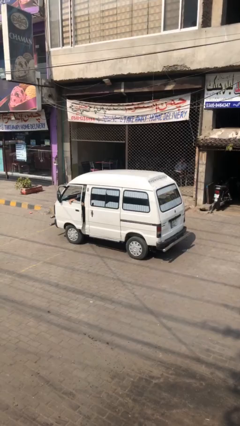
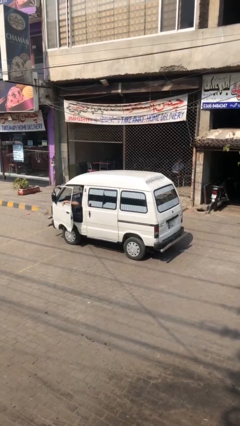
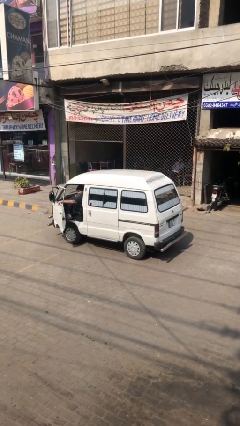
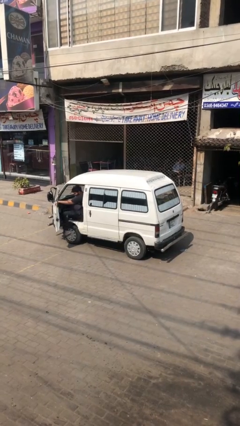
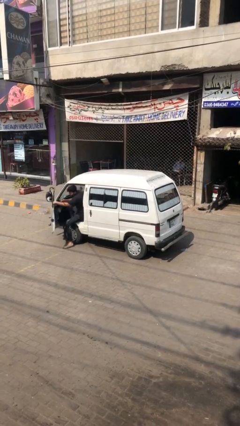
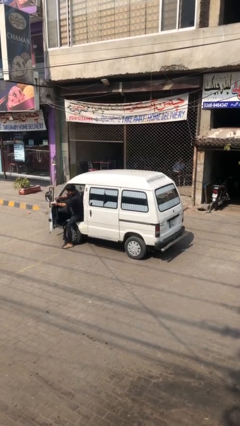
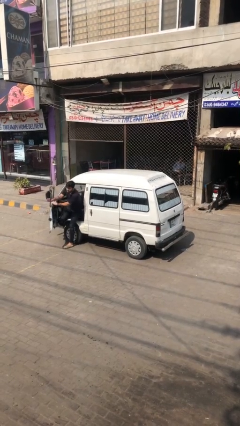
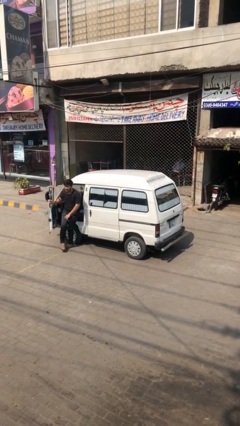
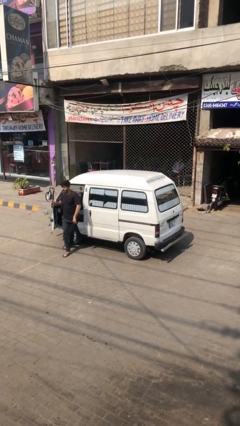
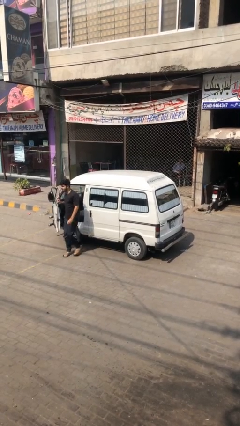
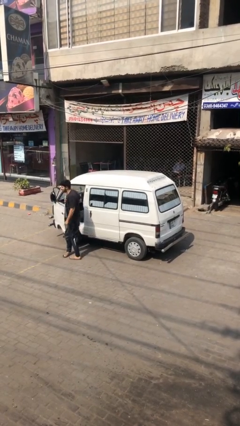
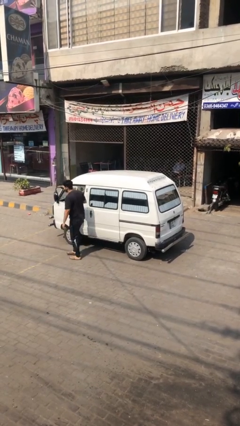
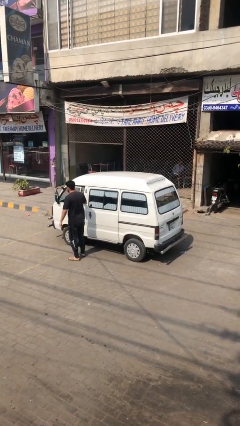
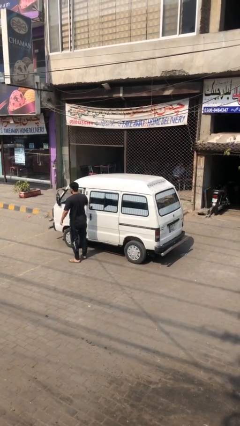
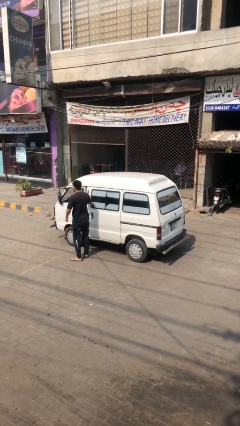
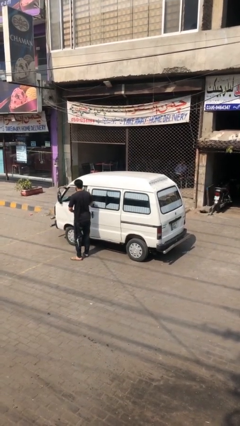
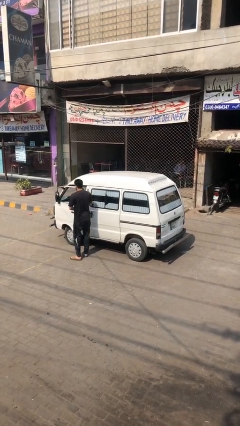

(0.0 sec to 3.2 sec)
car drops off person

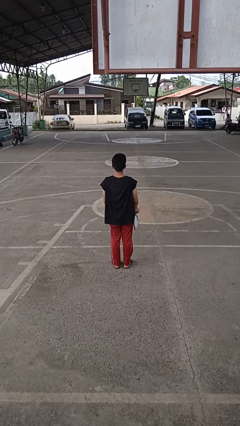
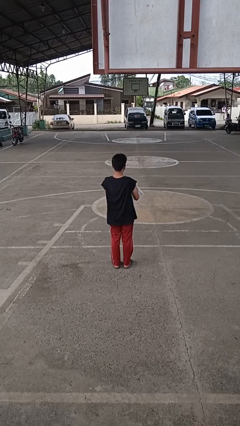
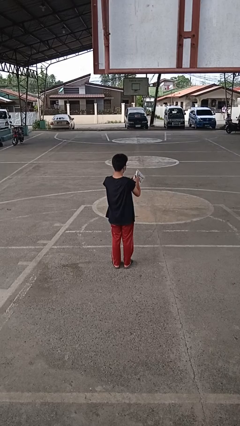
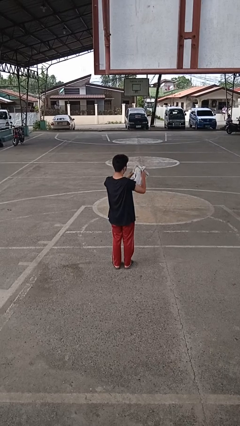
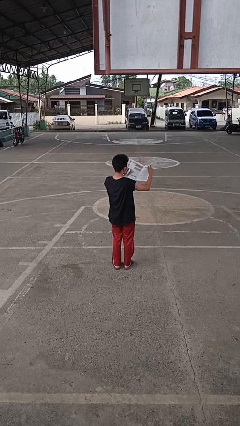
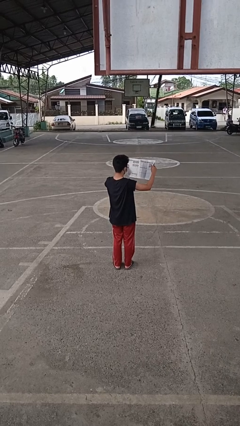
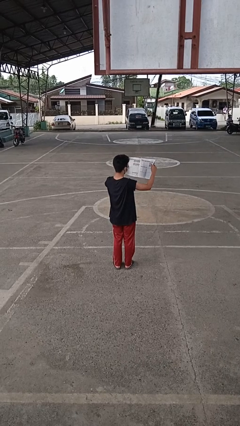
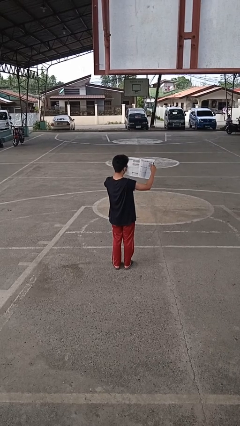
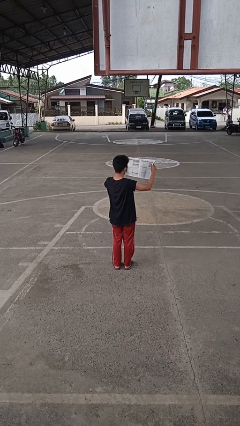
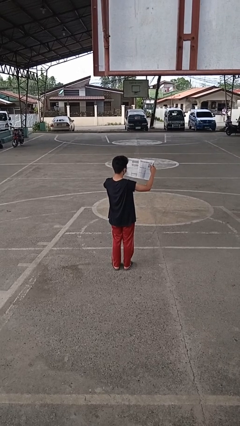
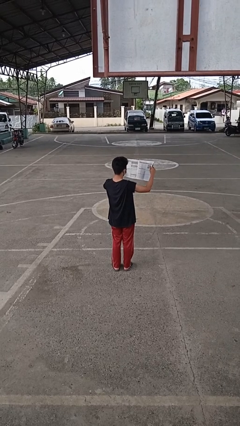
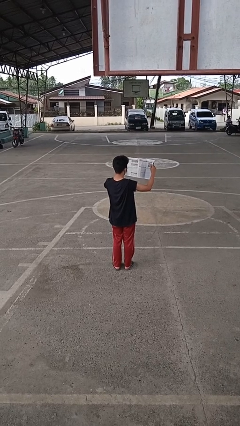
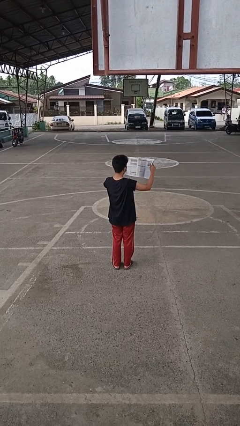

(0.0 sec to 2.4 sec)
person reads newspaper

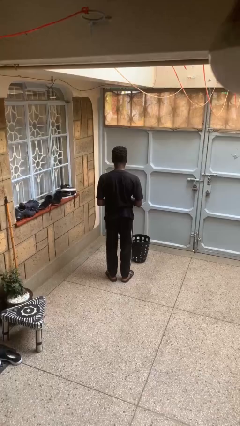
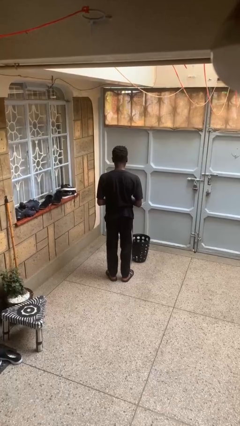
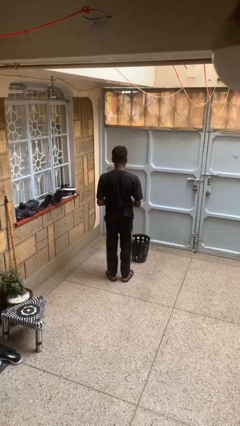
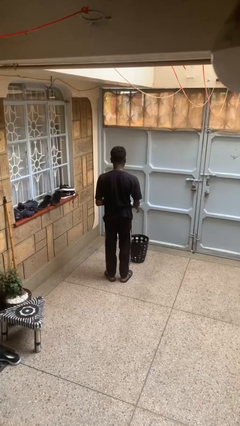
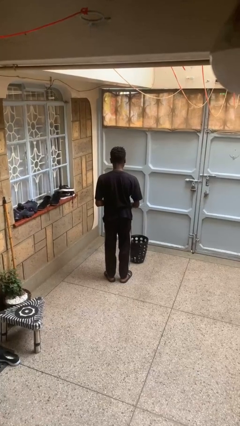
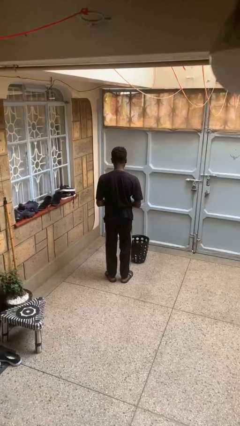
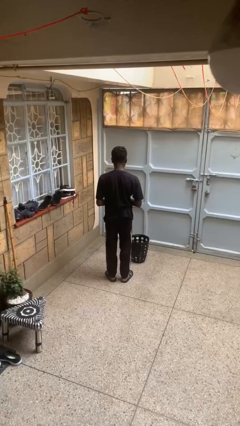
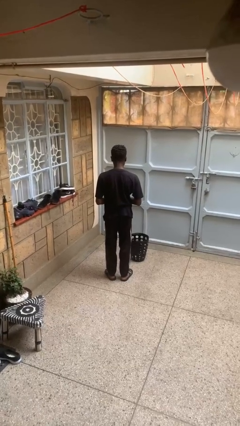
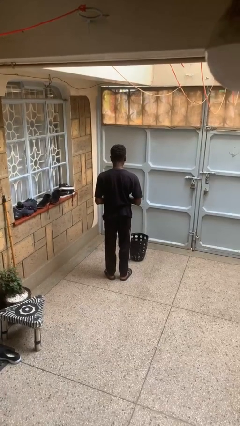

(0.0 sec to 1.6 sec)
person discards trash

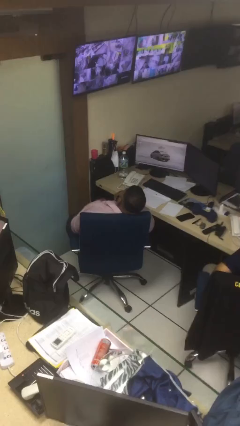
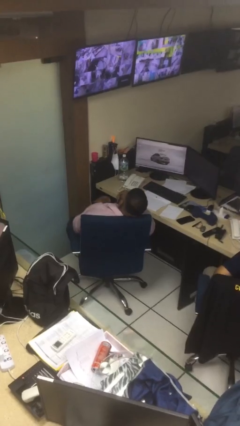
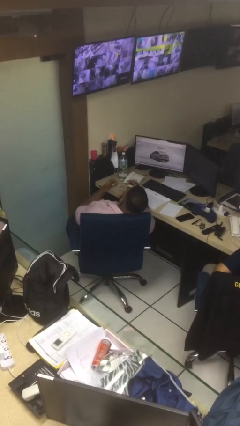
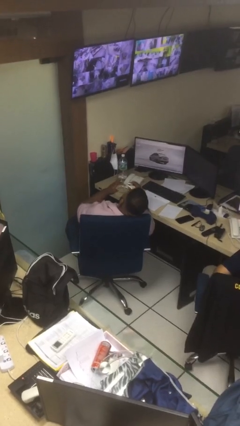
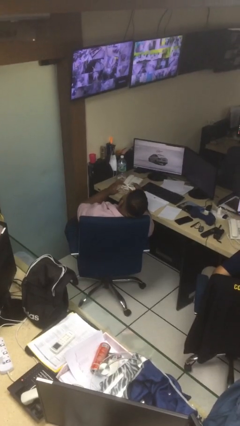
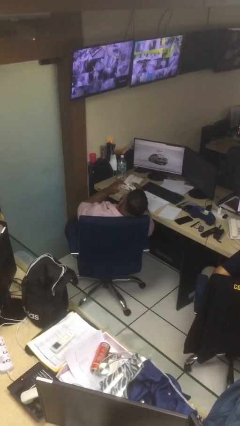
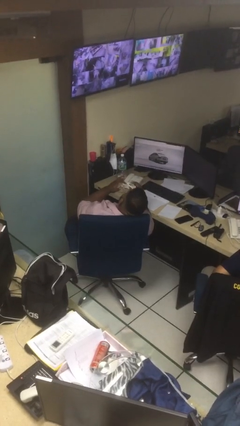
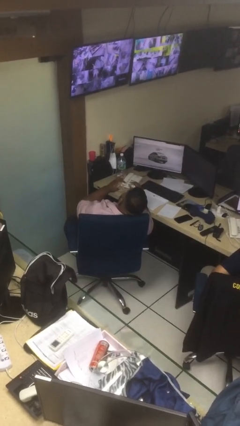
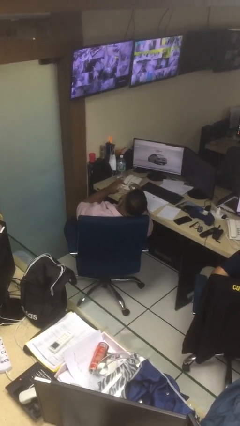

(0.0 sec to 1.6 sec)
person clips fingernails

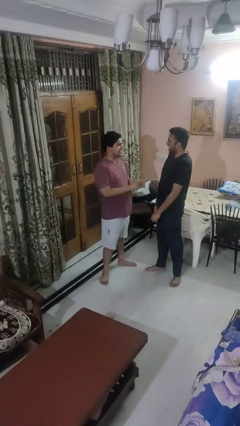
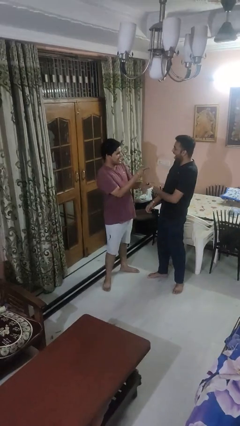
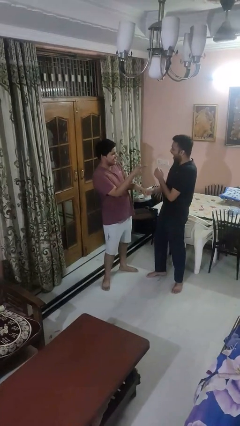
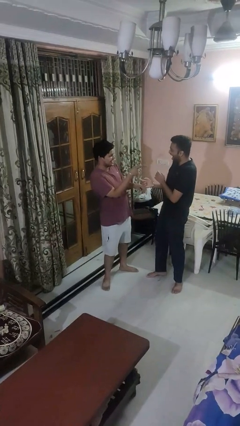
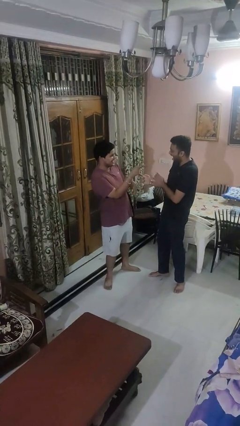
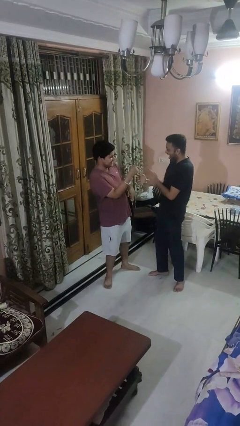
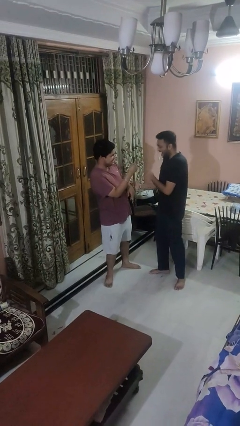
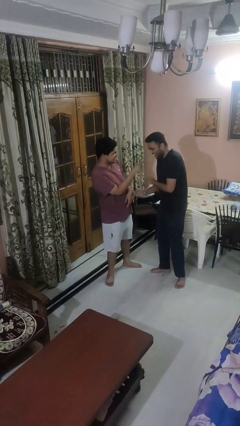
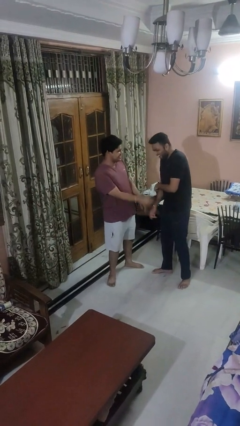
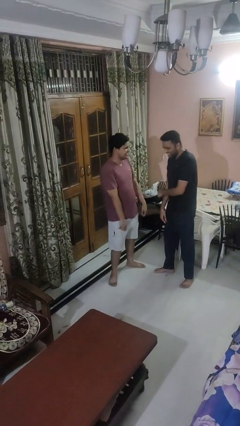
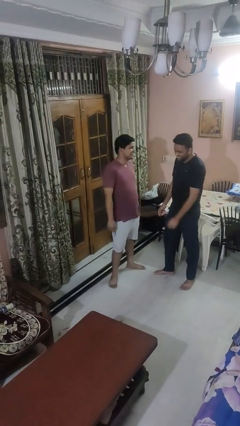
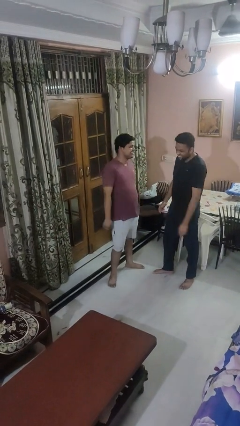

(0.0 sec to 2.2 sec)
person laughs with person

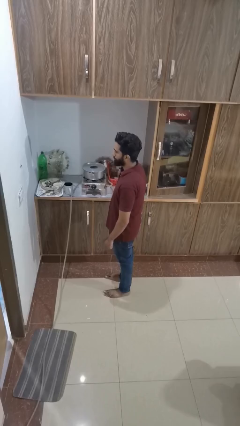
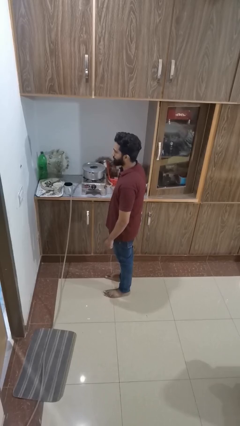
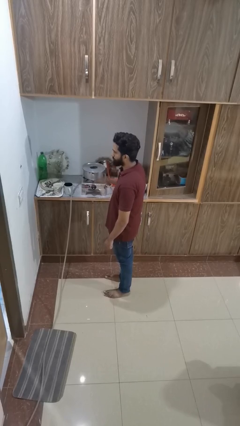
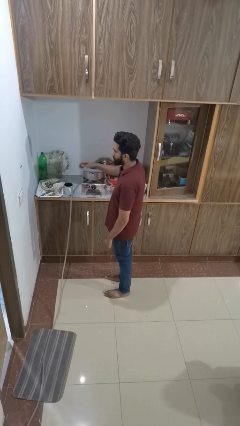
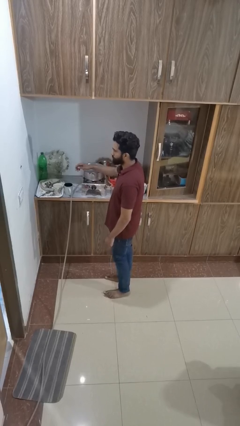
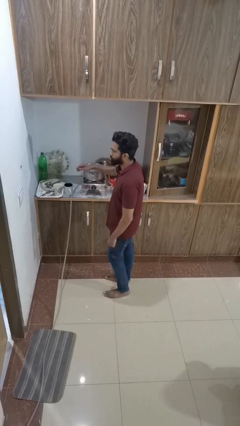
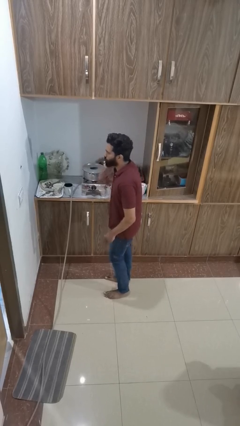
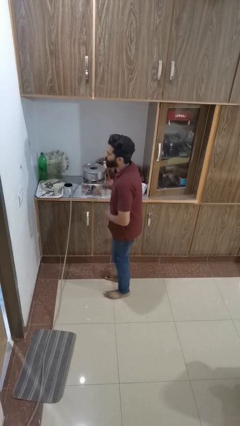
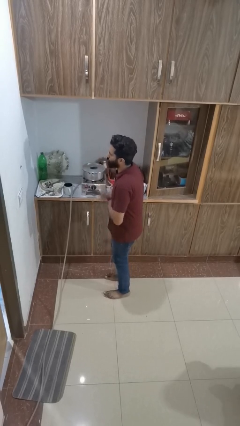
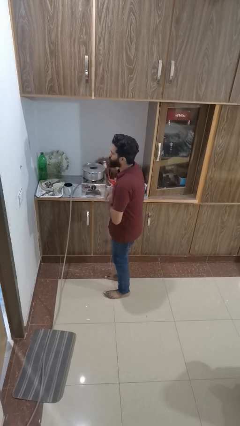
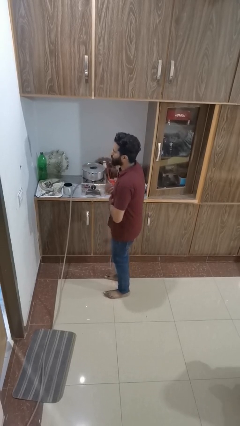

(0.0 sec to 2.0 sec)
person burns hand

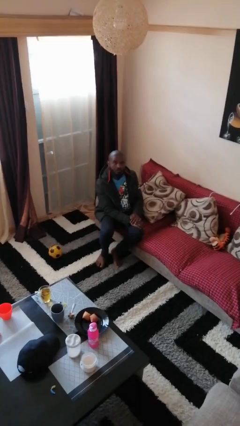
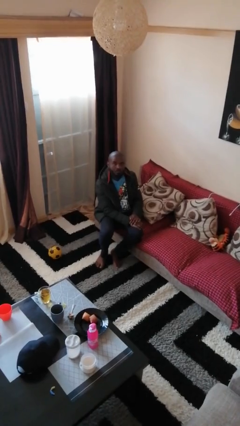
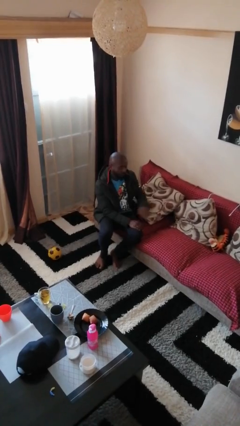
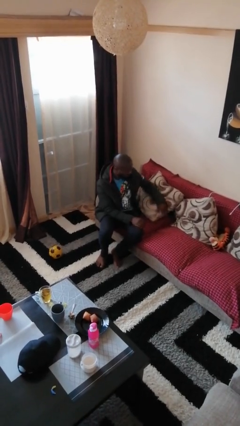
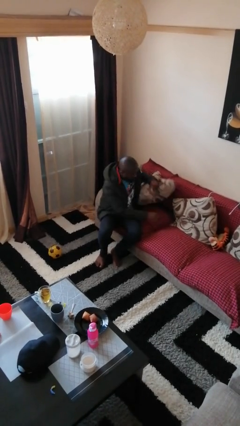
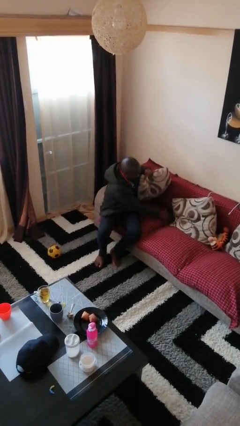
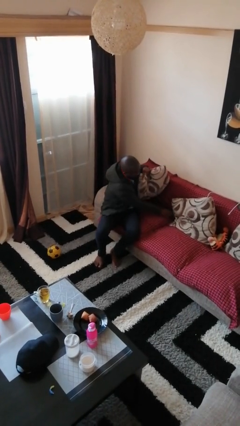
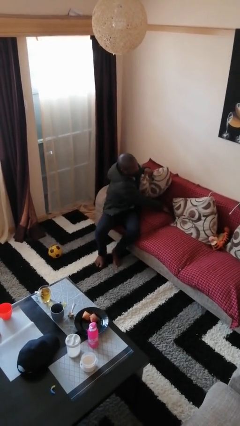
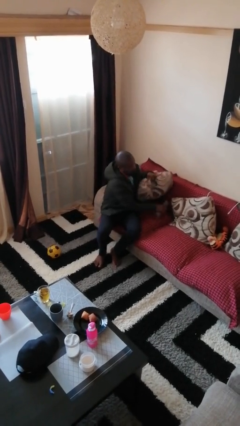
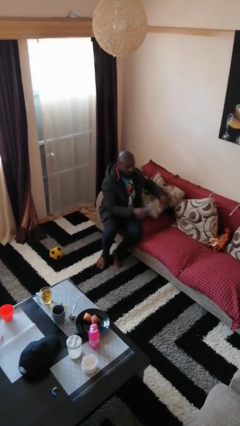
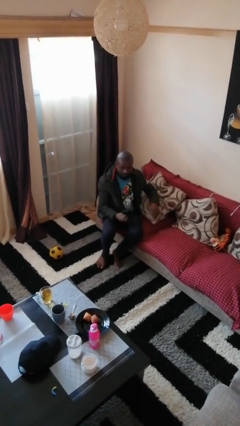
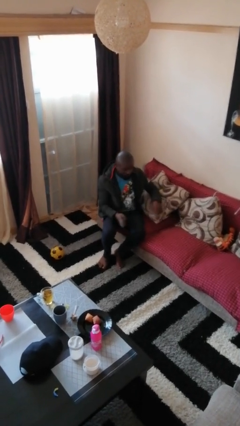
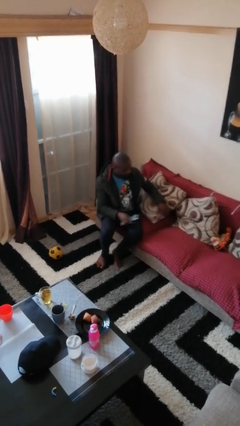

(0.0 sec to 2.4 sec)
person searches in couch

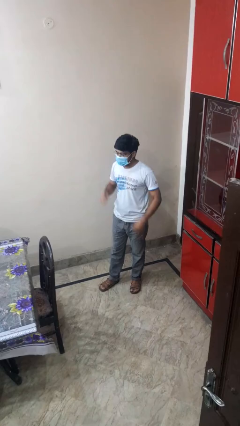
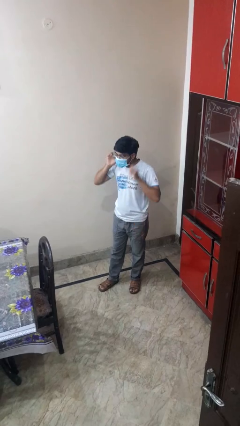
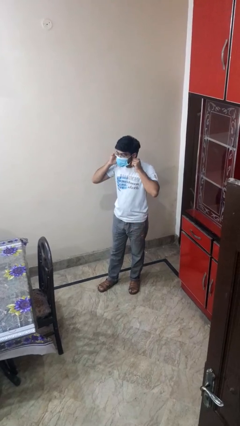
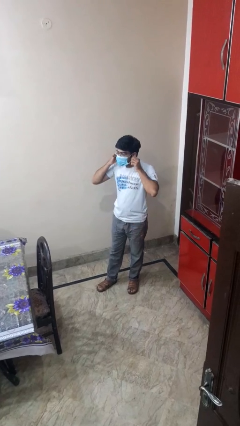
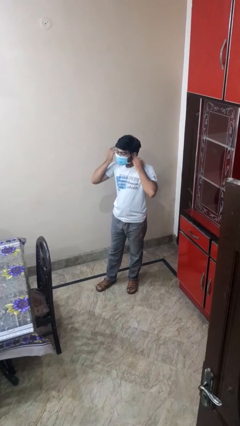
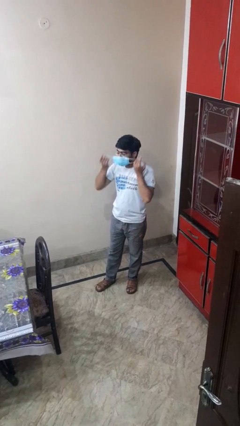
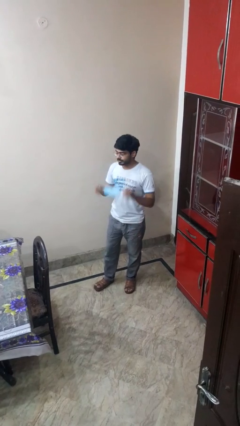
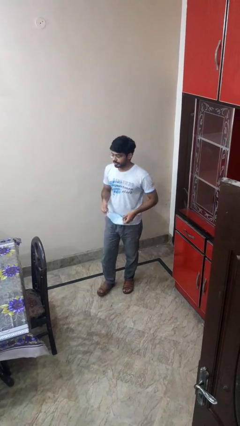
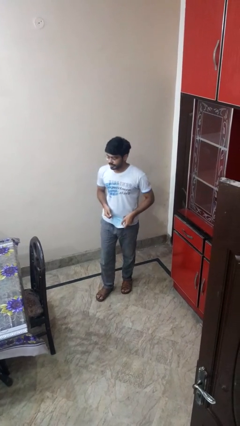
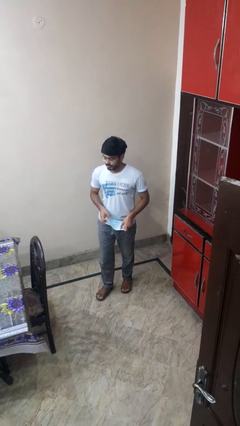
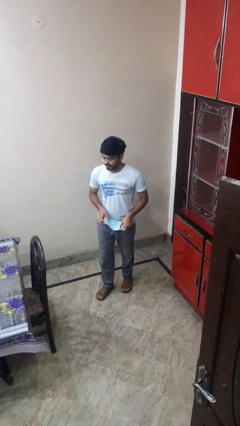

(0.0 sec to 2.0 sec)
person takes off facemask
